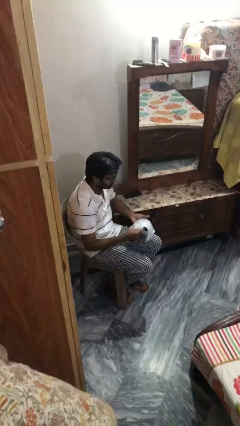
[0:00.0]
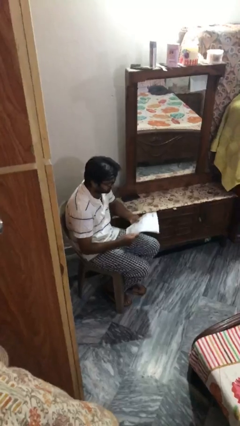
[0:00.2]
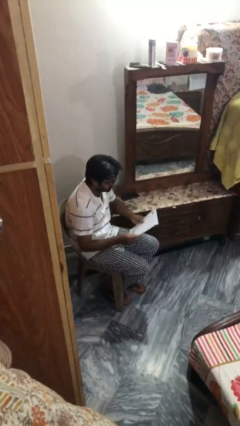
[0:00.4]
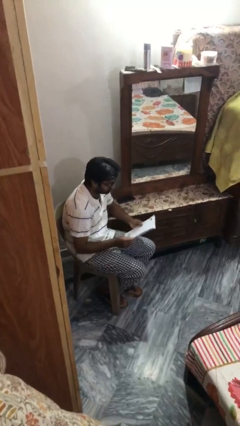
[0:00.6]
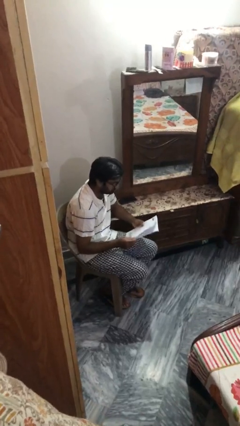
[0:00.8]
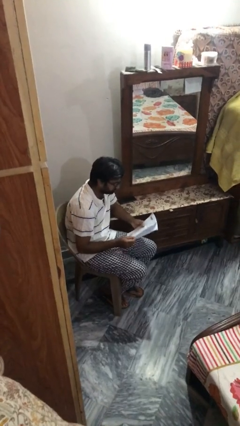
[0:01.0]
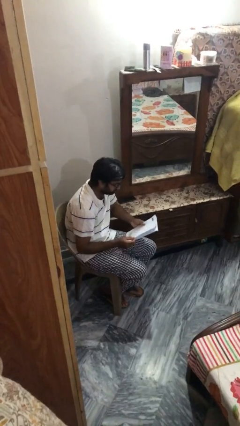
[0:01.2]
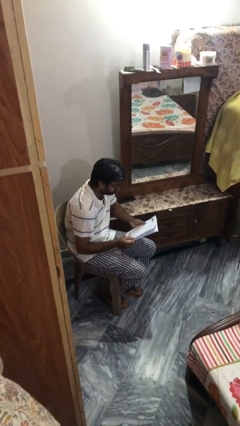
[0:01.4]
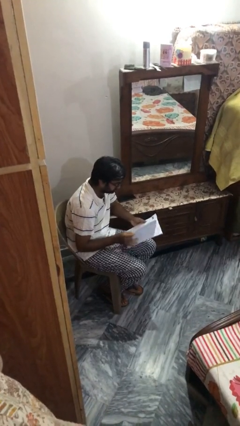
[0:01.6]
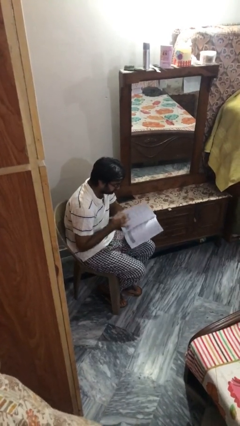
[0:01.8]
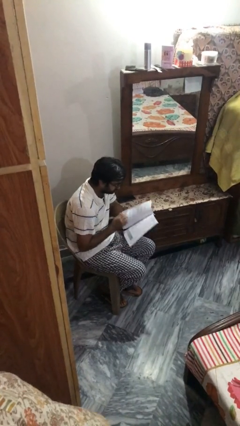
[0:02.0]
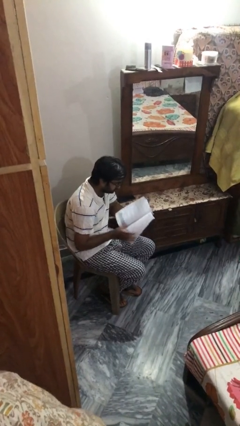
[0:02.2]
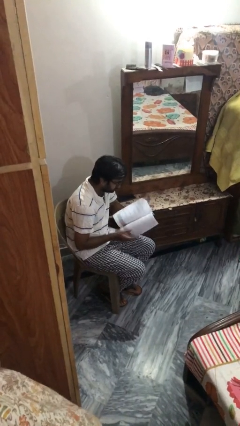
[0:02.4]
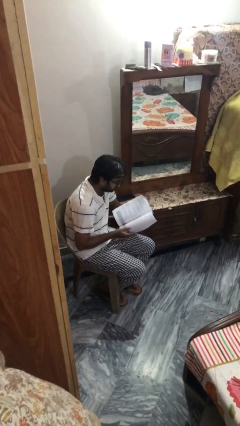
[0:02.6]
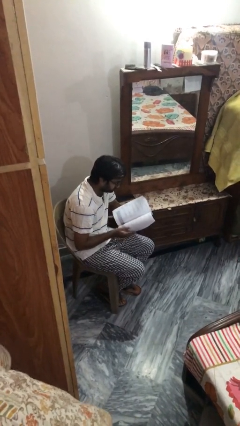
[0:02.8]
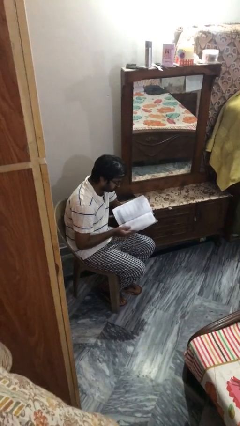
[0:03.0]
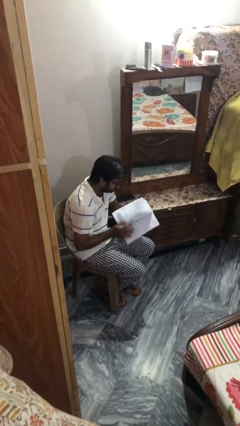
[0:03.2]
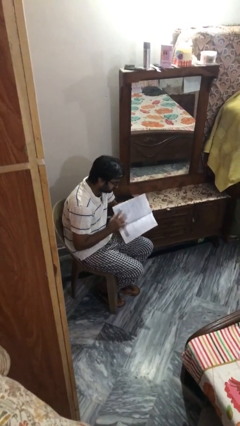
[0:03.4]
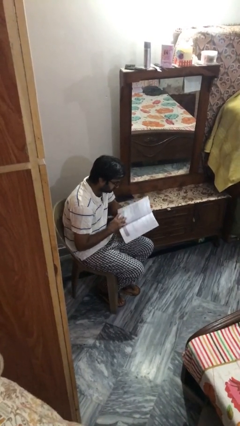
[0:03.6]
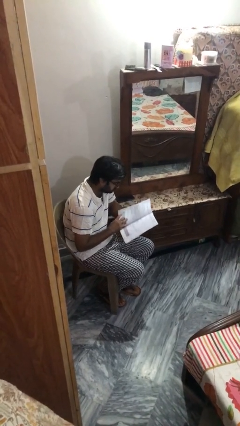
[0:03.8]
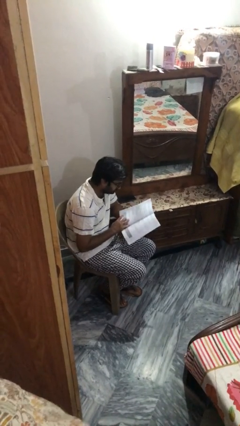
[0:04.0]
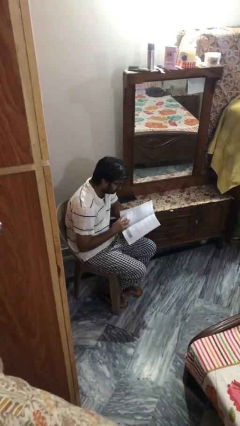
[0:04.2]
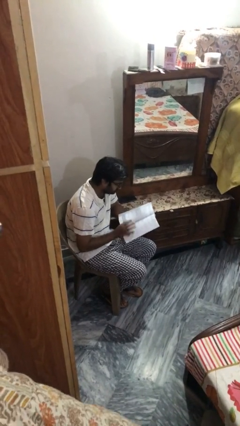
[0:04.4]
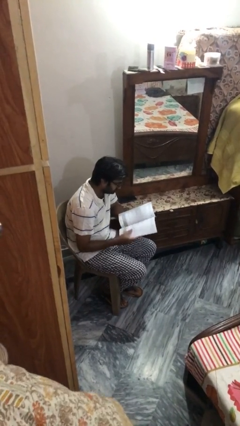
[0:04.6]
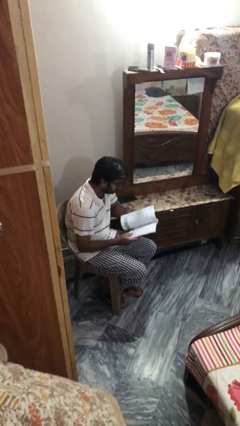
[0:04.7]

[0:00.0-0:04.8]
person reads document

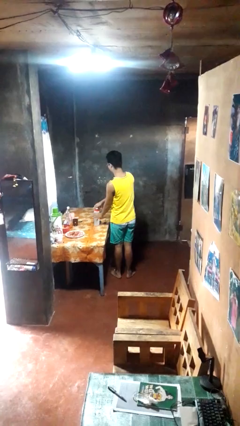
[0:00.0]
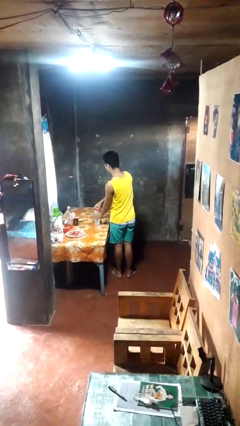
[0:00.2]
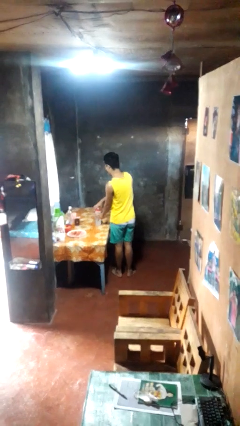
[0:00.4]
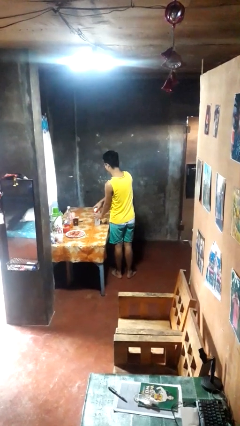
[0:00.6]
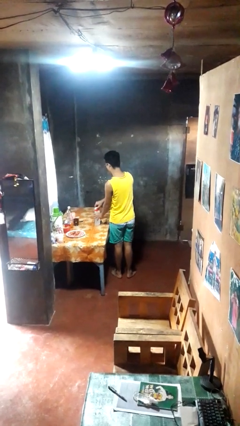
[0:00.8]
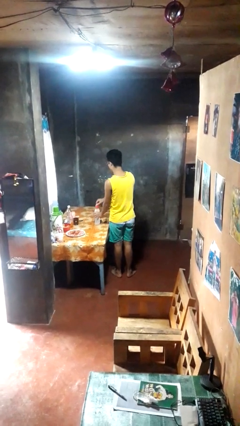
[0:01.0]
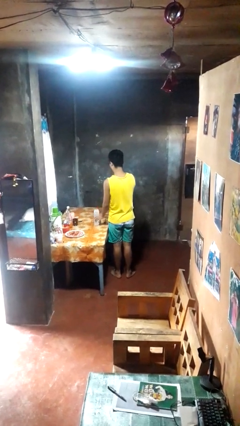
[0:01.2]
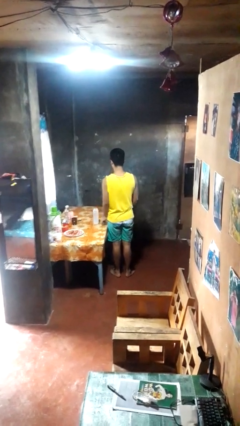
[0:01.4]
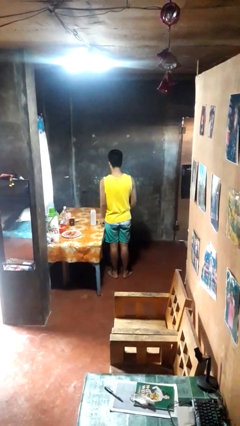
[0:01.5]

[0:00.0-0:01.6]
person opens jar

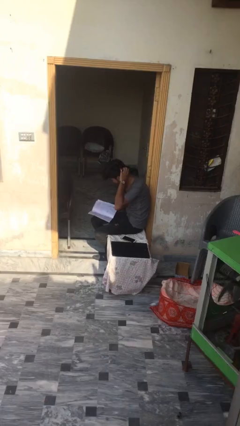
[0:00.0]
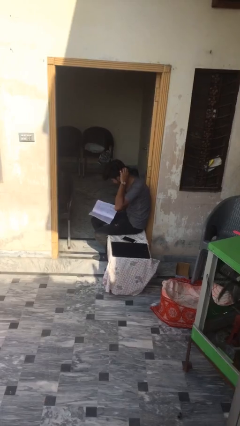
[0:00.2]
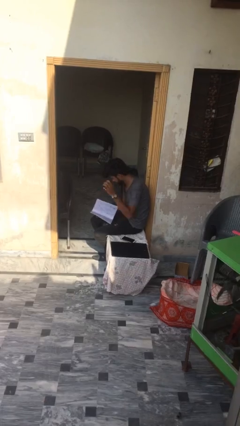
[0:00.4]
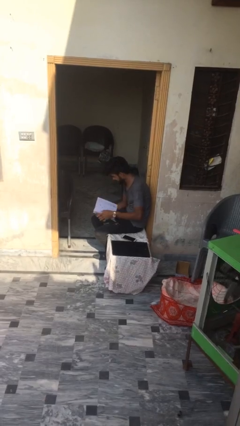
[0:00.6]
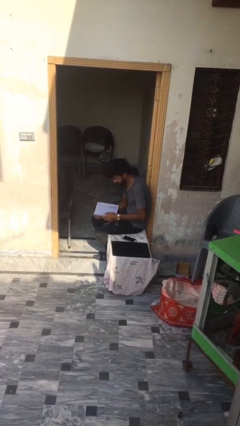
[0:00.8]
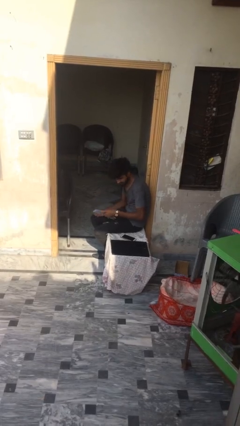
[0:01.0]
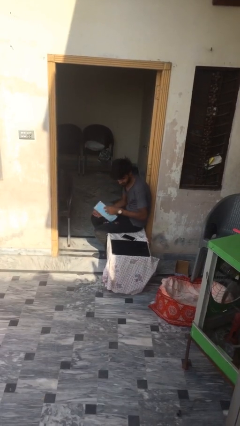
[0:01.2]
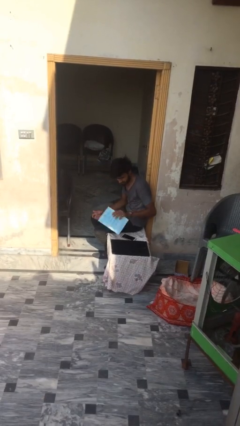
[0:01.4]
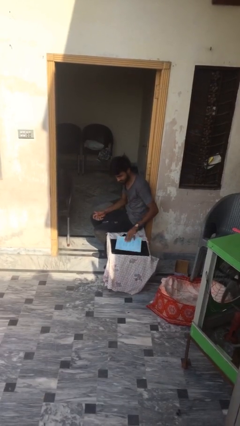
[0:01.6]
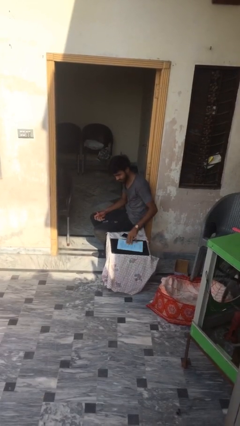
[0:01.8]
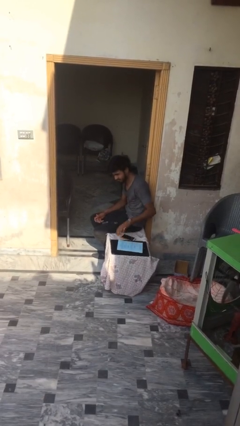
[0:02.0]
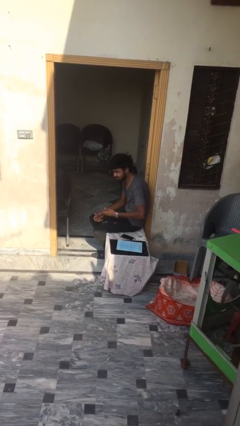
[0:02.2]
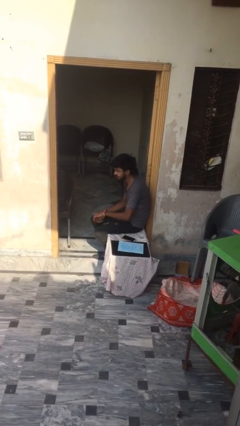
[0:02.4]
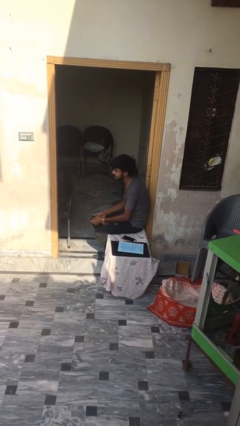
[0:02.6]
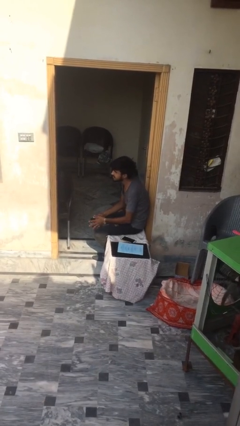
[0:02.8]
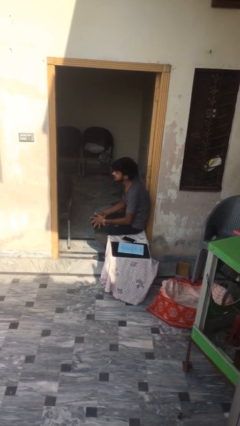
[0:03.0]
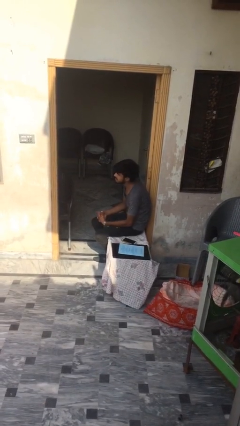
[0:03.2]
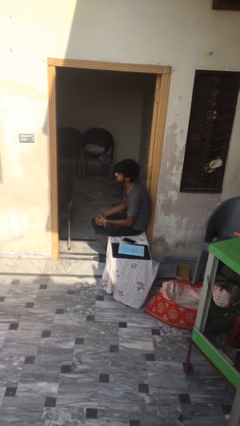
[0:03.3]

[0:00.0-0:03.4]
person puts down object on table

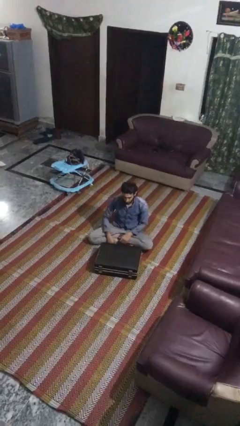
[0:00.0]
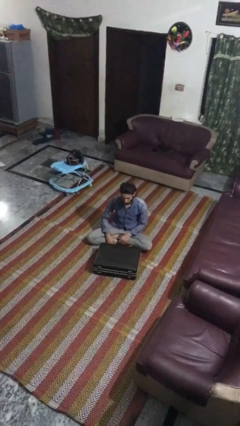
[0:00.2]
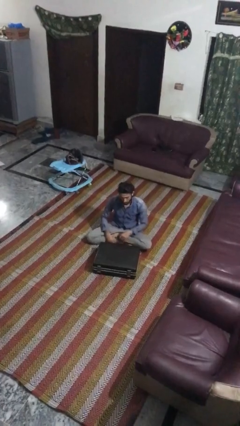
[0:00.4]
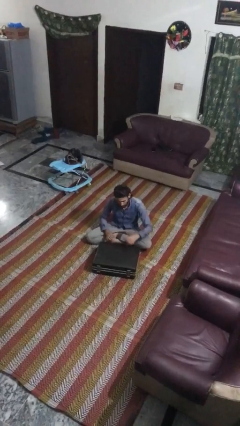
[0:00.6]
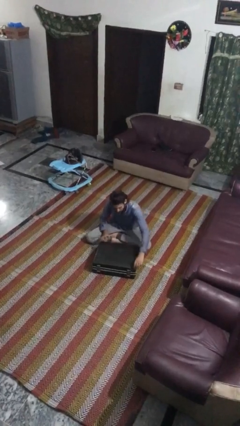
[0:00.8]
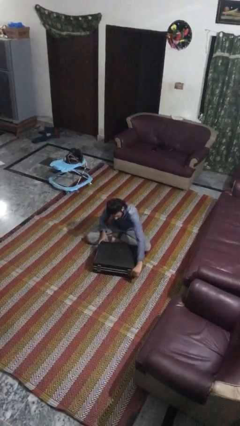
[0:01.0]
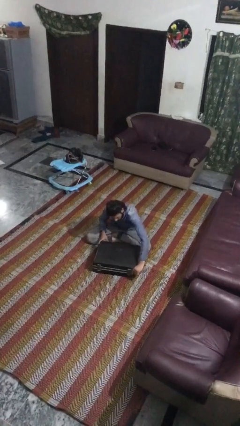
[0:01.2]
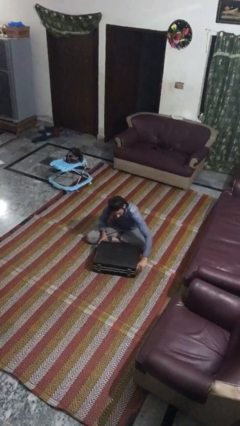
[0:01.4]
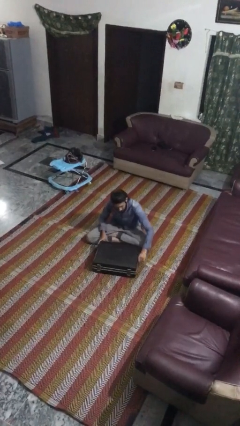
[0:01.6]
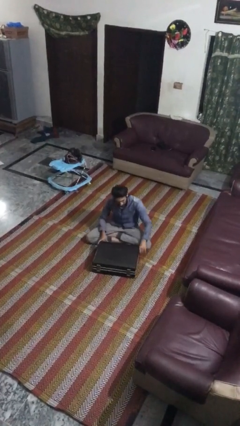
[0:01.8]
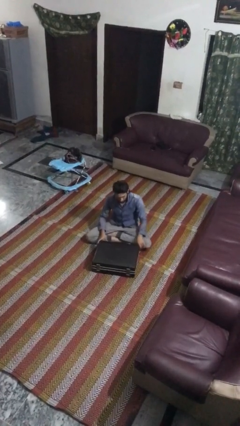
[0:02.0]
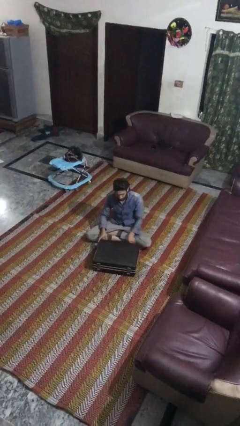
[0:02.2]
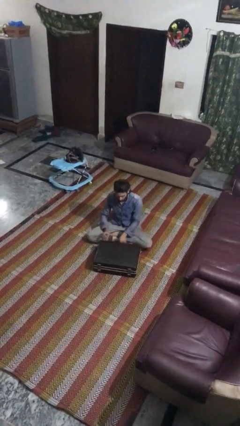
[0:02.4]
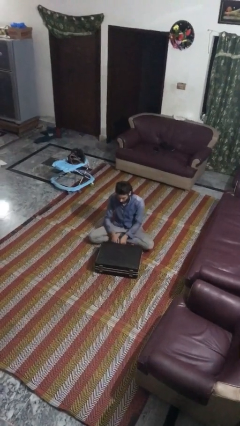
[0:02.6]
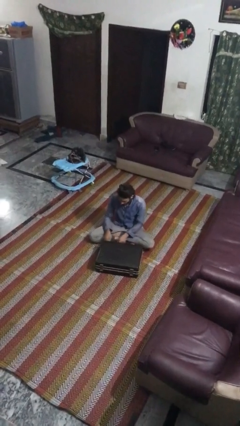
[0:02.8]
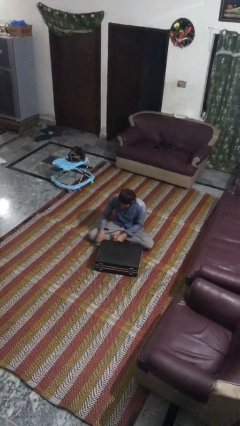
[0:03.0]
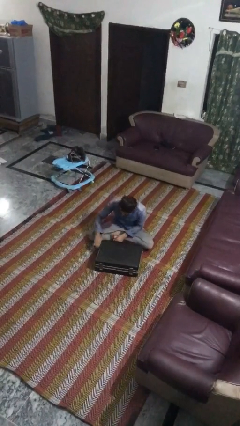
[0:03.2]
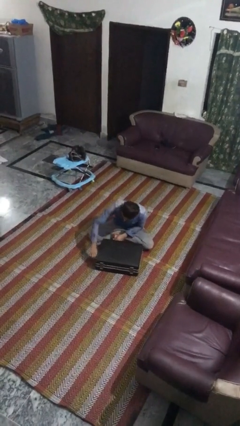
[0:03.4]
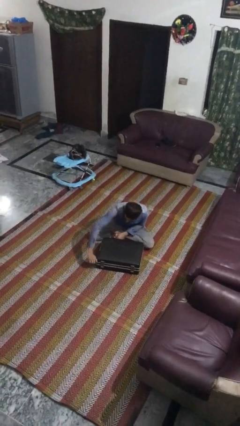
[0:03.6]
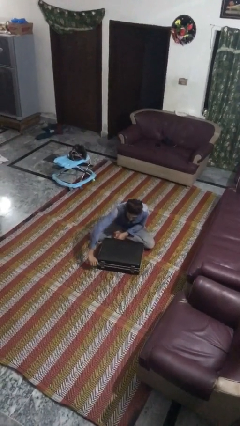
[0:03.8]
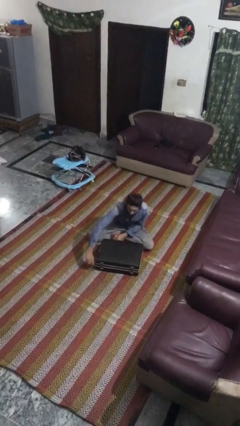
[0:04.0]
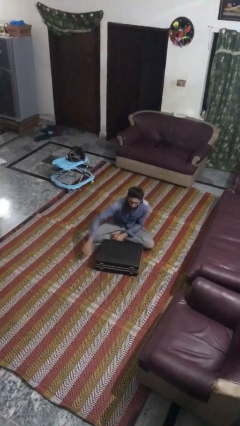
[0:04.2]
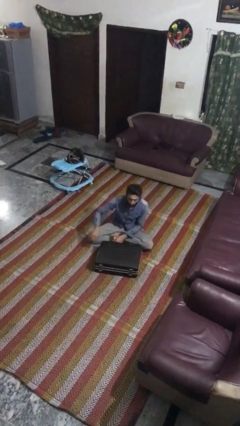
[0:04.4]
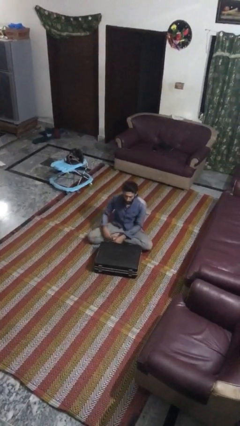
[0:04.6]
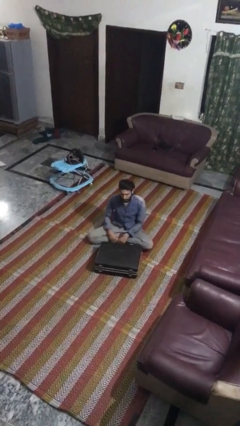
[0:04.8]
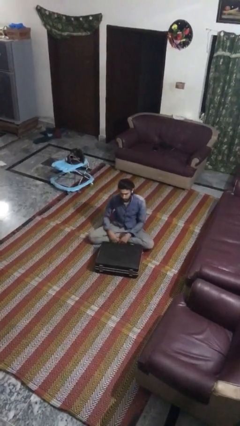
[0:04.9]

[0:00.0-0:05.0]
person closes suitcase

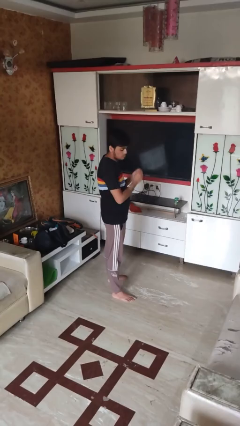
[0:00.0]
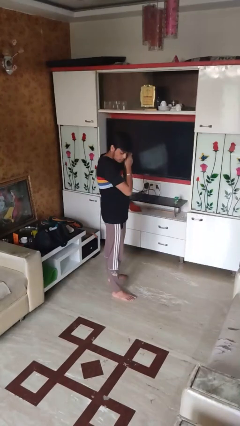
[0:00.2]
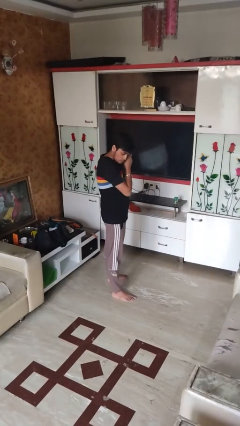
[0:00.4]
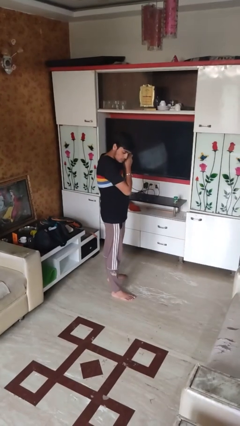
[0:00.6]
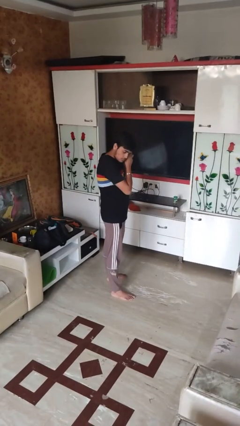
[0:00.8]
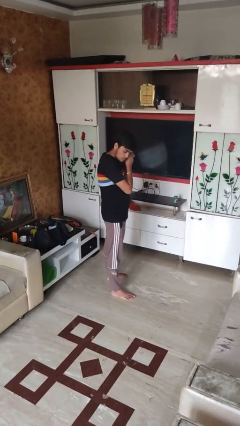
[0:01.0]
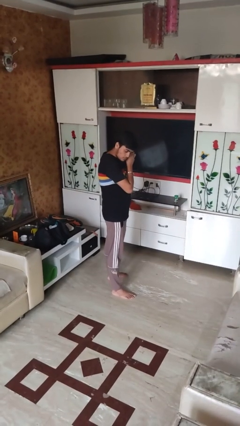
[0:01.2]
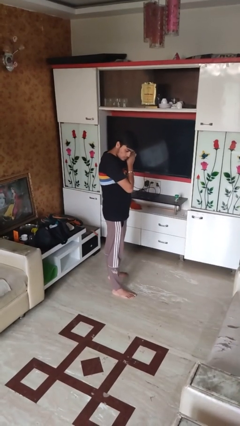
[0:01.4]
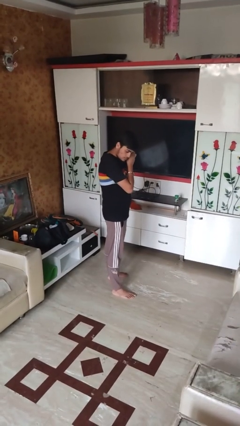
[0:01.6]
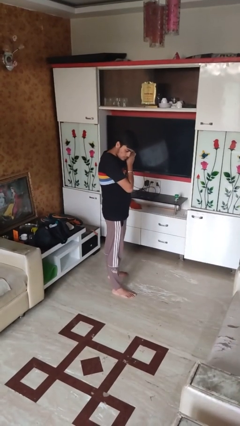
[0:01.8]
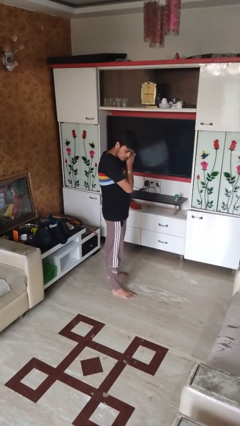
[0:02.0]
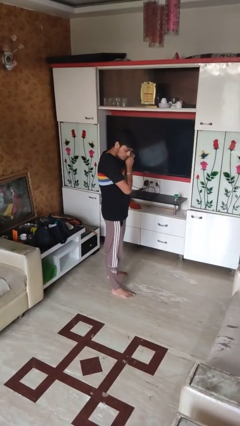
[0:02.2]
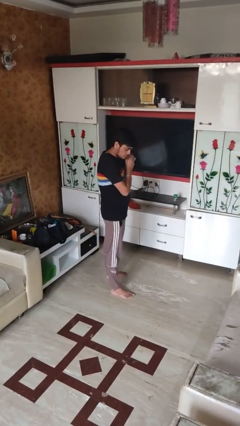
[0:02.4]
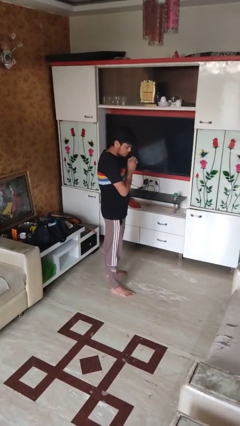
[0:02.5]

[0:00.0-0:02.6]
person puts on earrings

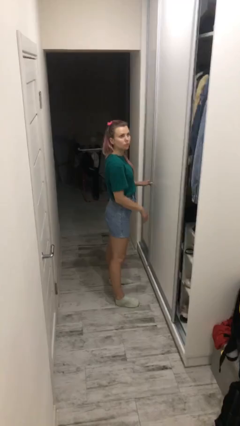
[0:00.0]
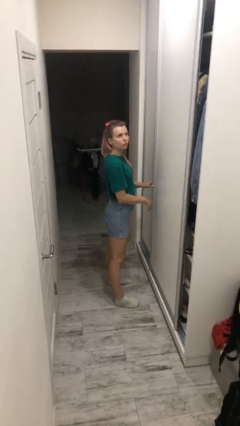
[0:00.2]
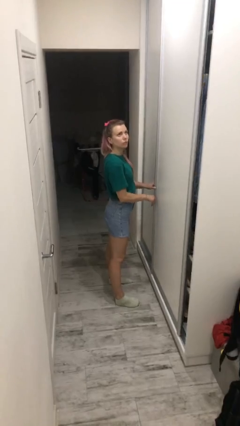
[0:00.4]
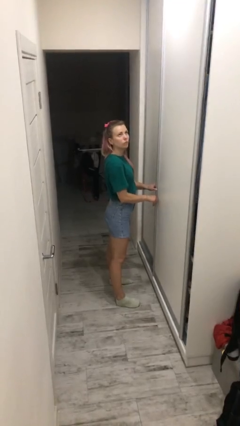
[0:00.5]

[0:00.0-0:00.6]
person closes sliding door
